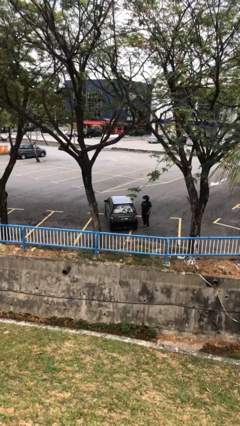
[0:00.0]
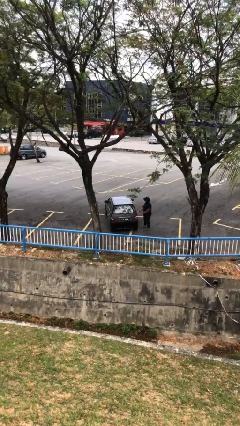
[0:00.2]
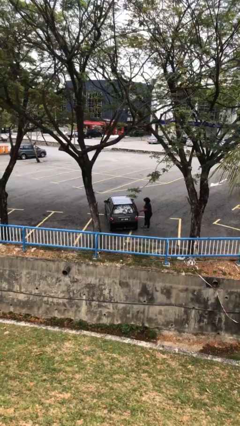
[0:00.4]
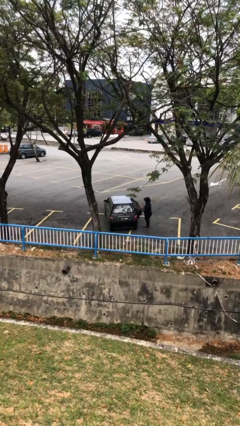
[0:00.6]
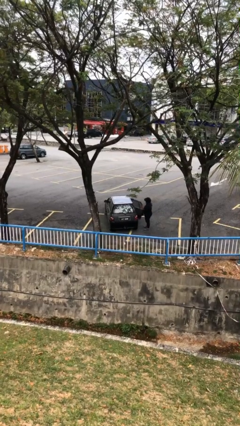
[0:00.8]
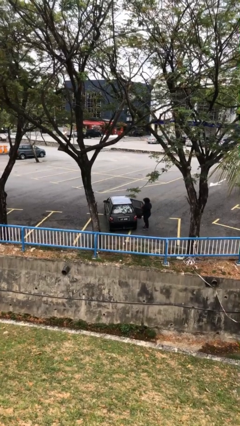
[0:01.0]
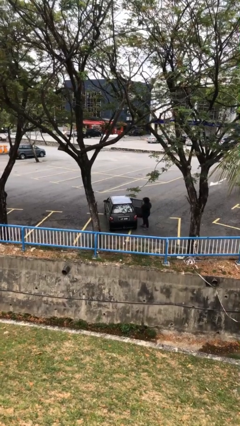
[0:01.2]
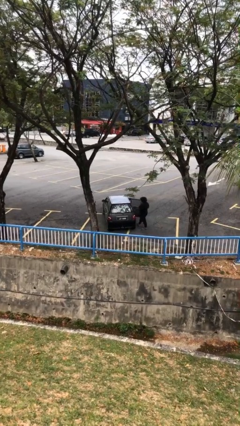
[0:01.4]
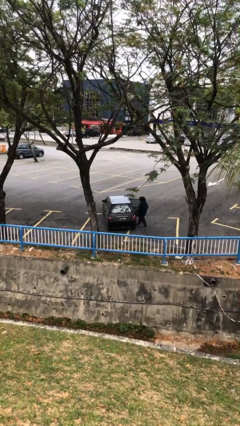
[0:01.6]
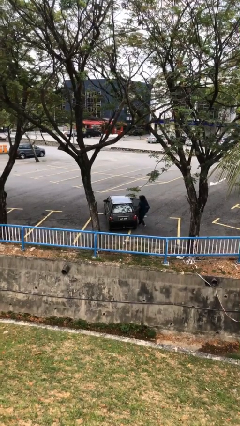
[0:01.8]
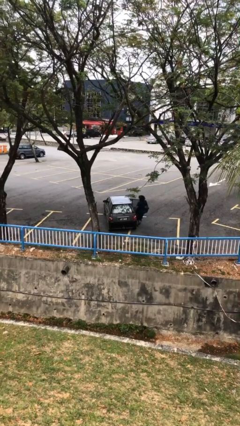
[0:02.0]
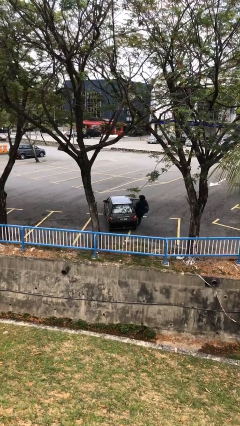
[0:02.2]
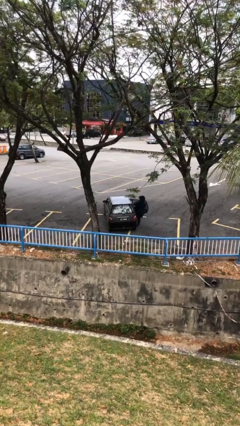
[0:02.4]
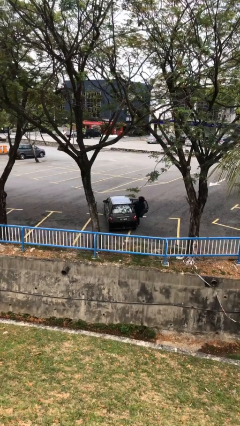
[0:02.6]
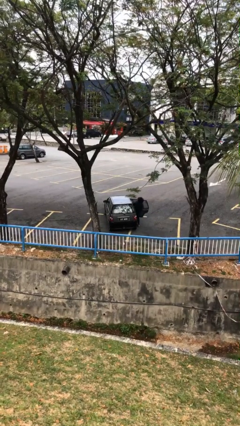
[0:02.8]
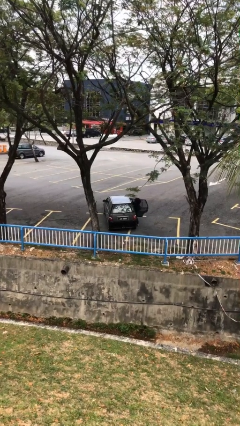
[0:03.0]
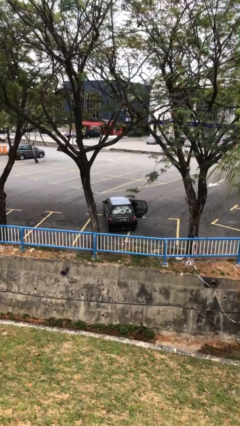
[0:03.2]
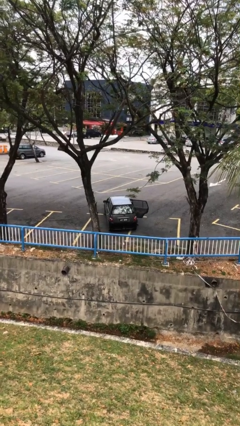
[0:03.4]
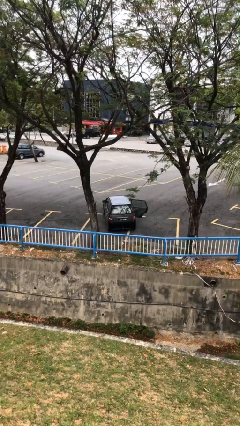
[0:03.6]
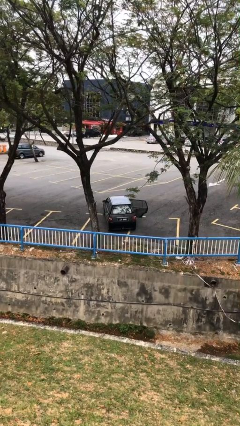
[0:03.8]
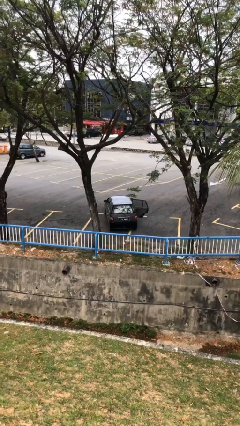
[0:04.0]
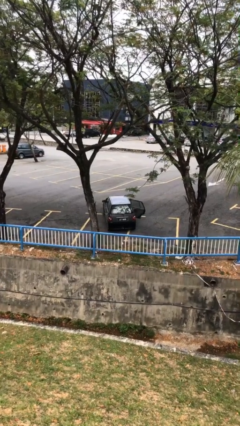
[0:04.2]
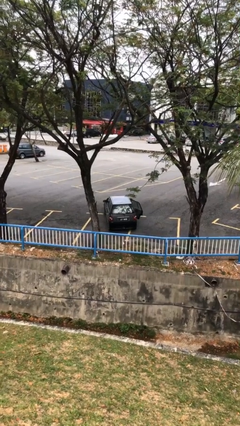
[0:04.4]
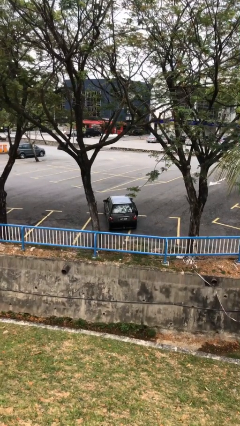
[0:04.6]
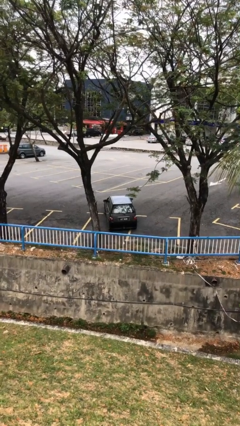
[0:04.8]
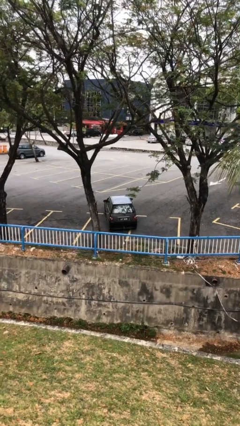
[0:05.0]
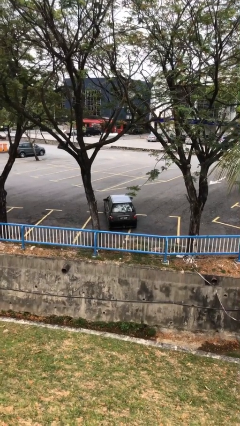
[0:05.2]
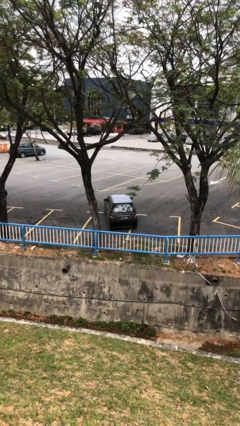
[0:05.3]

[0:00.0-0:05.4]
car picks up person

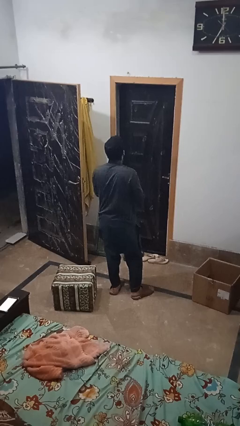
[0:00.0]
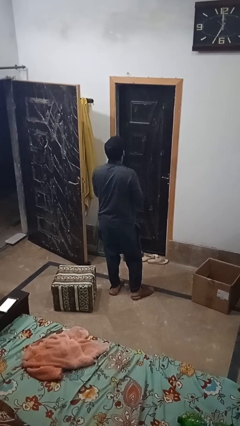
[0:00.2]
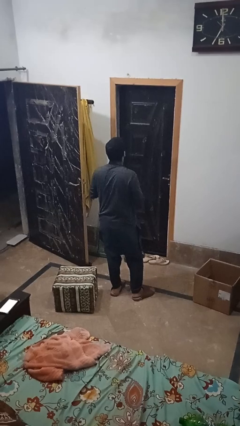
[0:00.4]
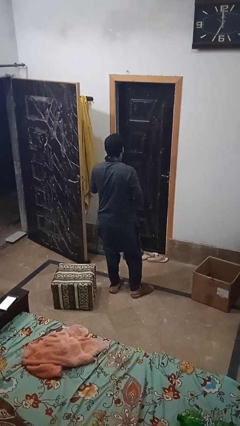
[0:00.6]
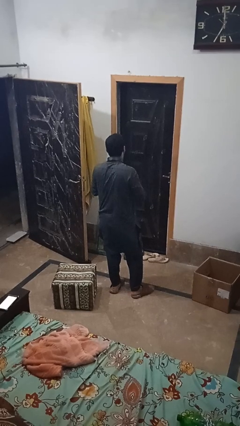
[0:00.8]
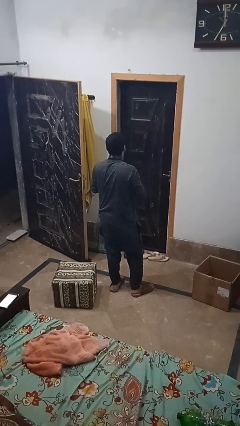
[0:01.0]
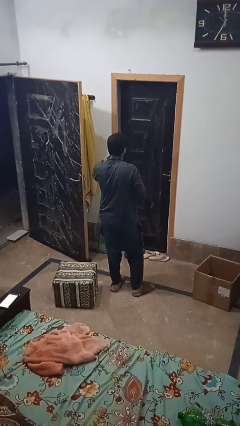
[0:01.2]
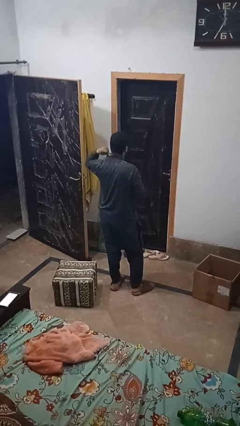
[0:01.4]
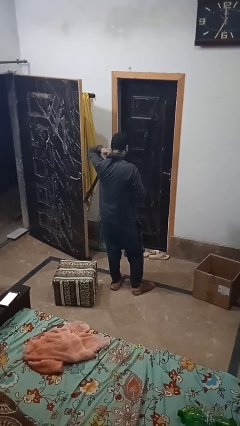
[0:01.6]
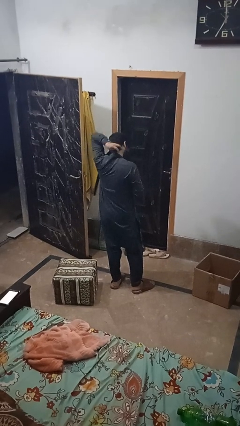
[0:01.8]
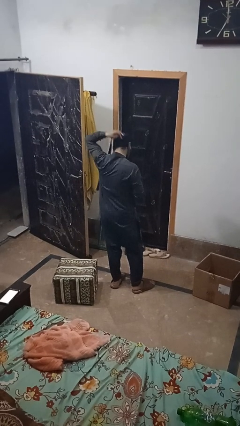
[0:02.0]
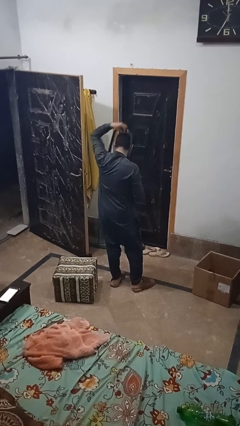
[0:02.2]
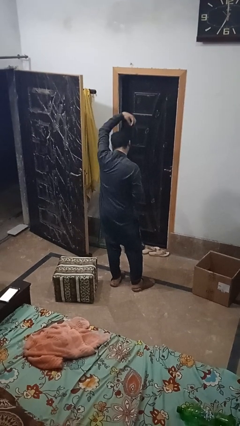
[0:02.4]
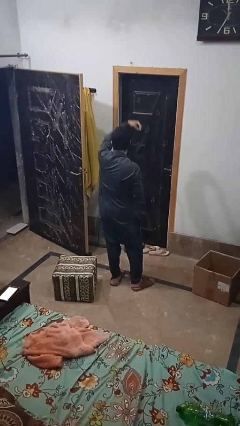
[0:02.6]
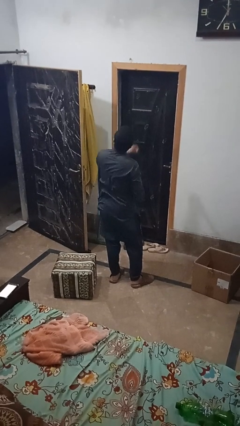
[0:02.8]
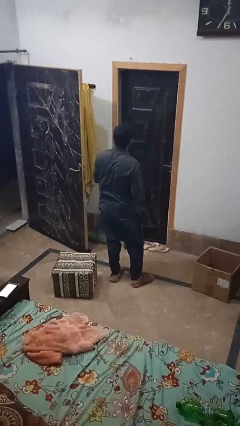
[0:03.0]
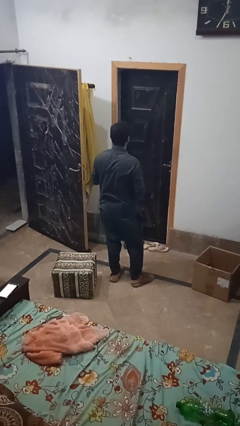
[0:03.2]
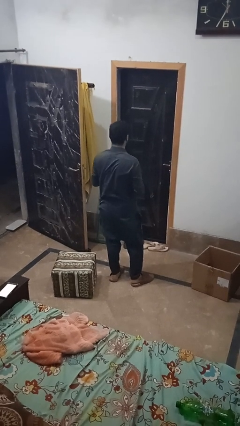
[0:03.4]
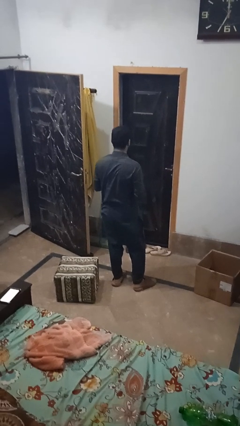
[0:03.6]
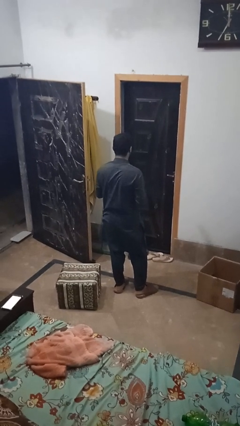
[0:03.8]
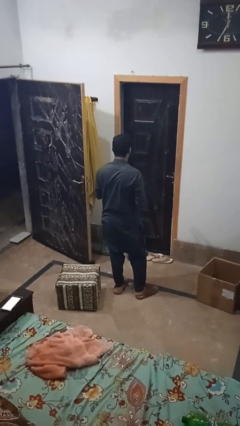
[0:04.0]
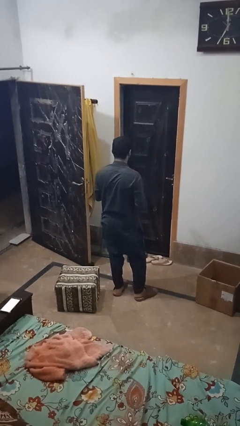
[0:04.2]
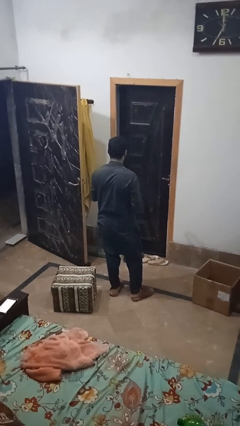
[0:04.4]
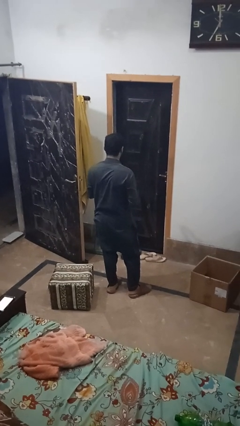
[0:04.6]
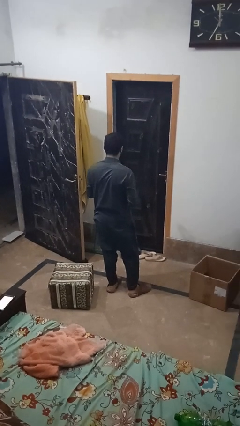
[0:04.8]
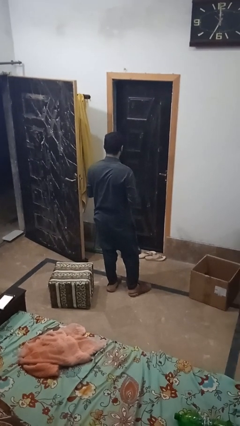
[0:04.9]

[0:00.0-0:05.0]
person takes off necktie

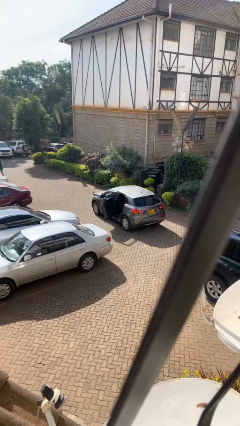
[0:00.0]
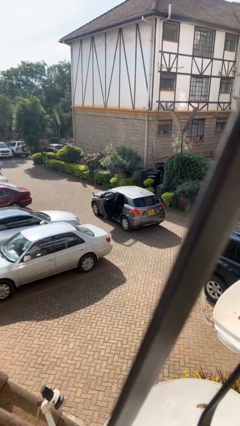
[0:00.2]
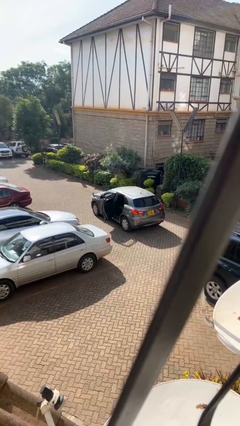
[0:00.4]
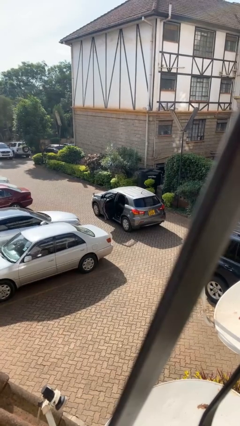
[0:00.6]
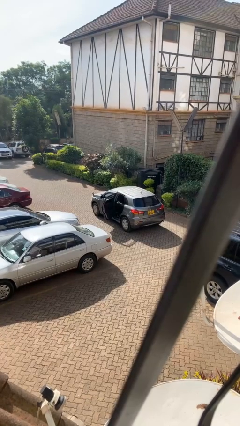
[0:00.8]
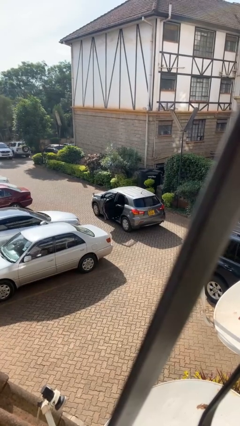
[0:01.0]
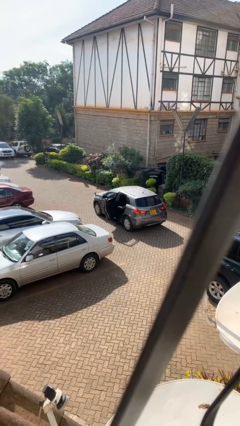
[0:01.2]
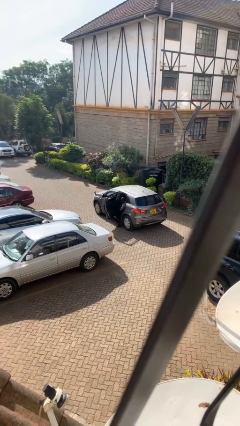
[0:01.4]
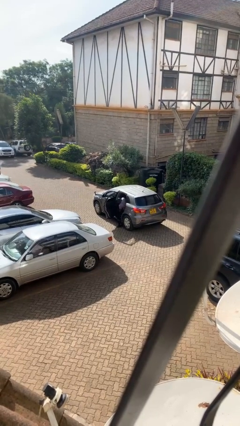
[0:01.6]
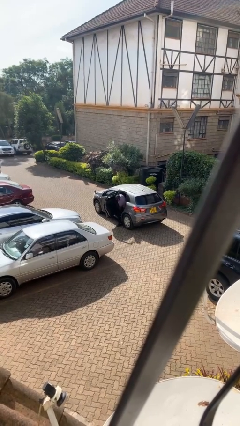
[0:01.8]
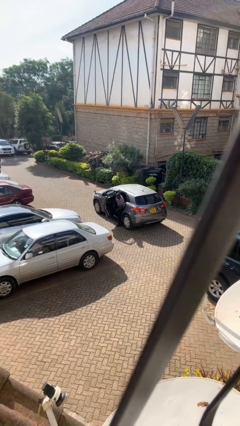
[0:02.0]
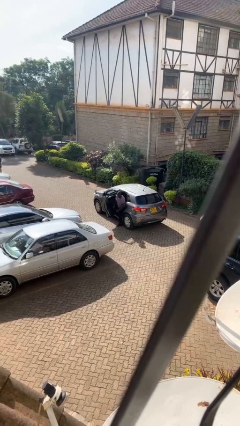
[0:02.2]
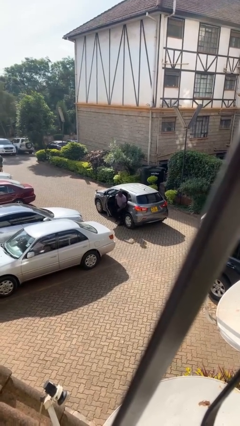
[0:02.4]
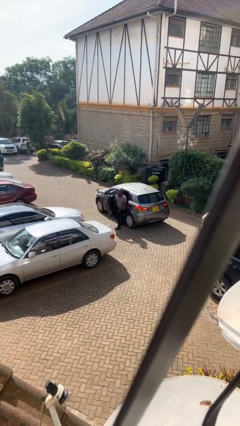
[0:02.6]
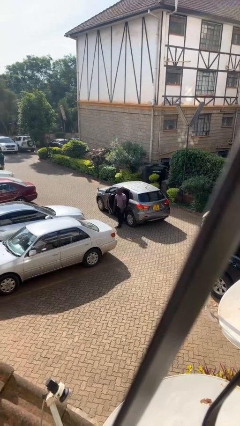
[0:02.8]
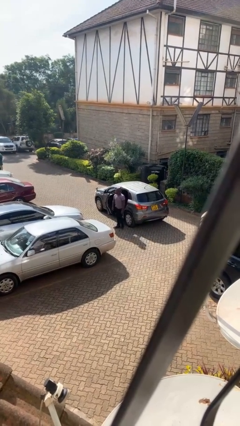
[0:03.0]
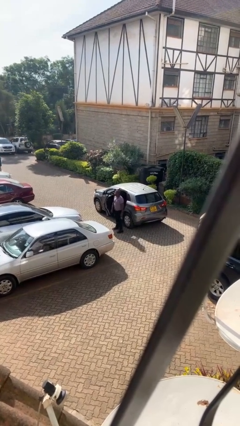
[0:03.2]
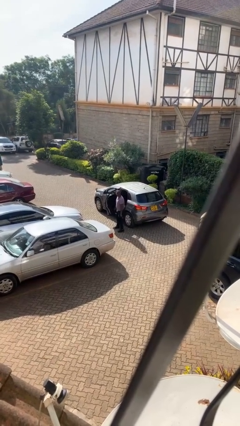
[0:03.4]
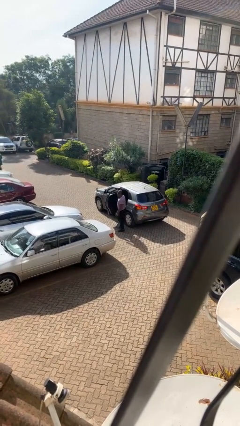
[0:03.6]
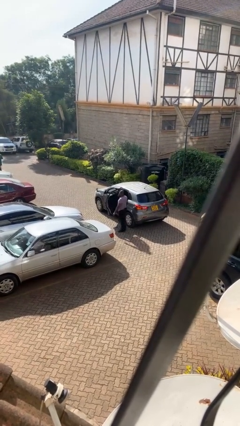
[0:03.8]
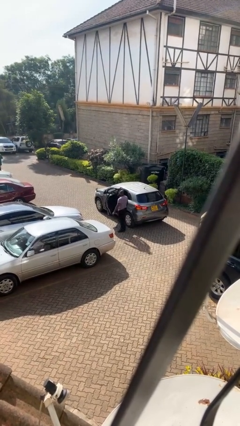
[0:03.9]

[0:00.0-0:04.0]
person exits car

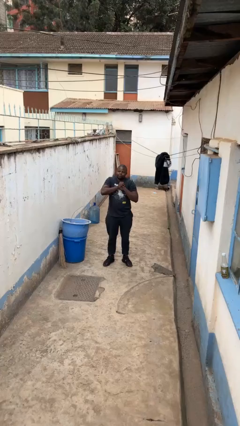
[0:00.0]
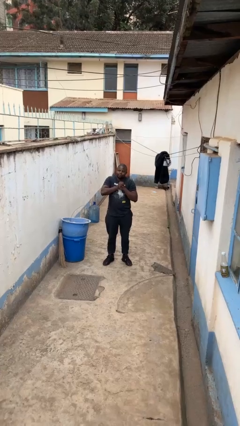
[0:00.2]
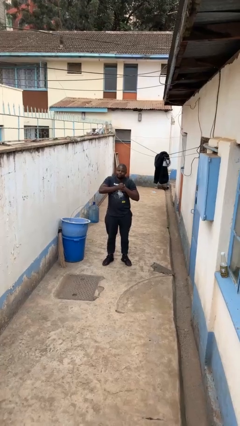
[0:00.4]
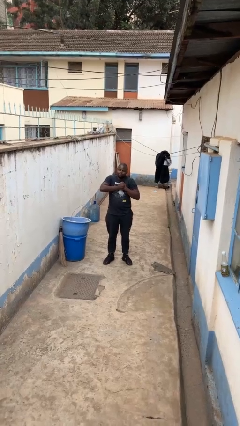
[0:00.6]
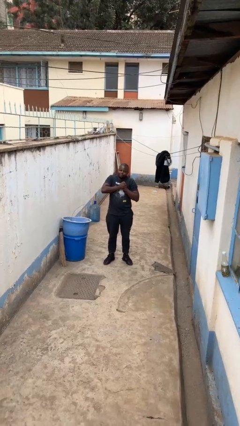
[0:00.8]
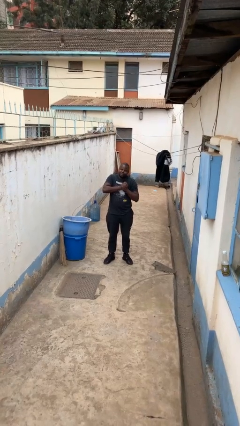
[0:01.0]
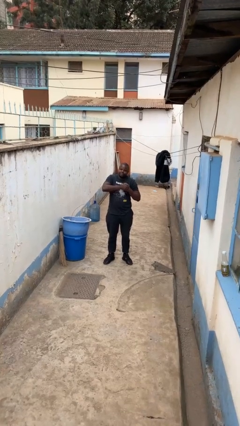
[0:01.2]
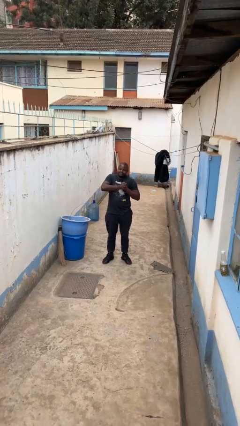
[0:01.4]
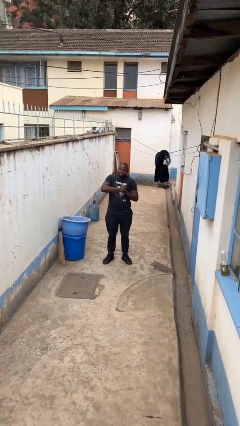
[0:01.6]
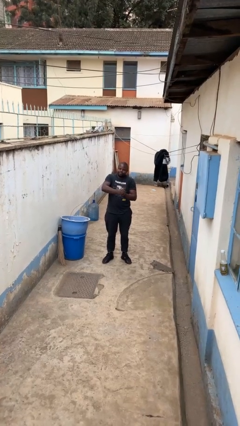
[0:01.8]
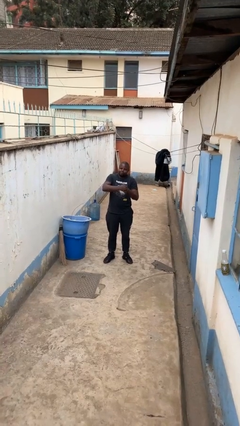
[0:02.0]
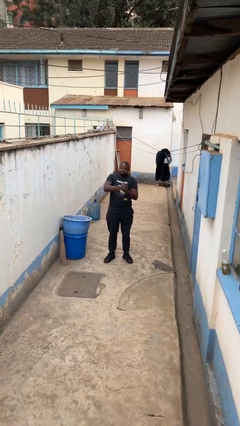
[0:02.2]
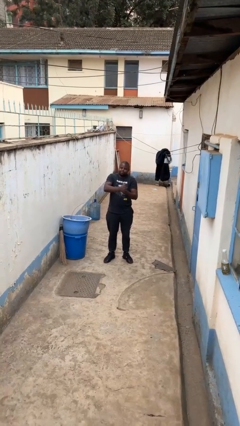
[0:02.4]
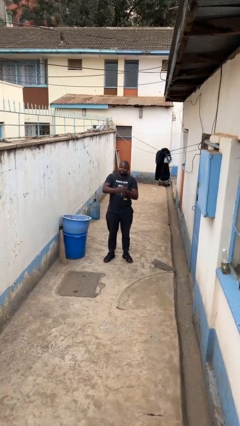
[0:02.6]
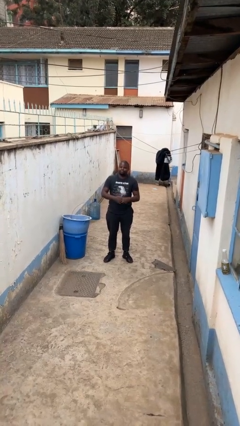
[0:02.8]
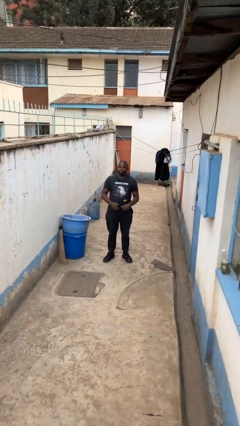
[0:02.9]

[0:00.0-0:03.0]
person cracks knuckles

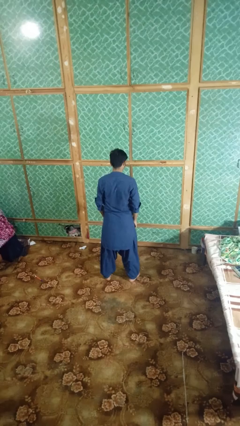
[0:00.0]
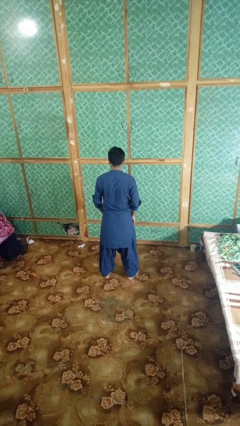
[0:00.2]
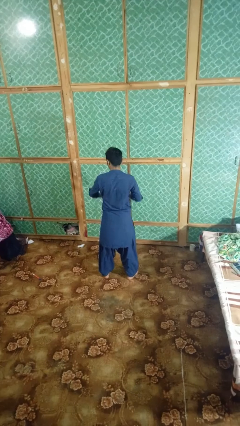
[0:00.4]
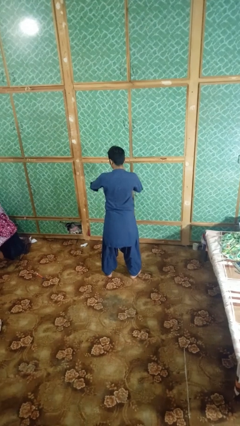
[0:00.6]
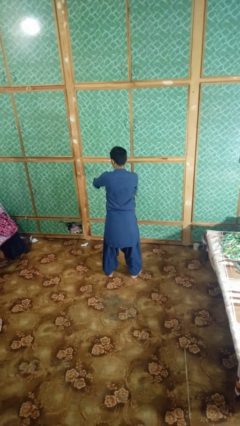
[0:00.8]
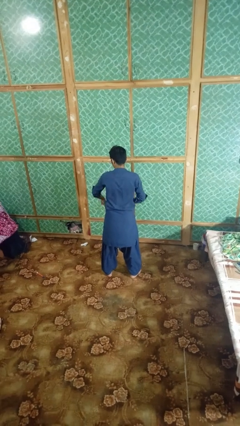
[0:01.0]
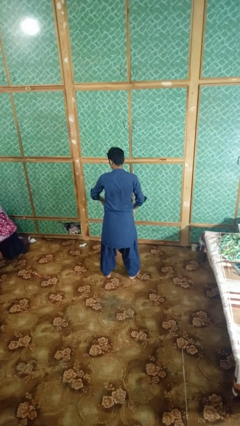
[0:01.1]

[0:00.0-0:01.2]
person swats bug
